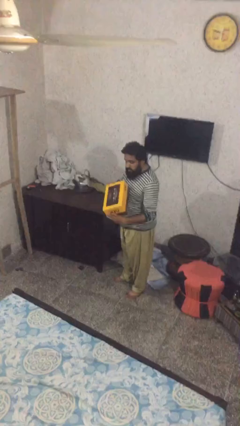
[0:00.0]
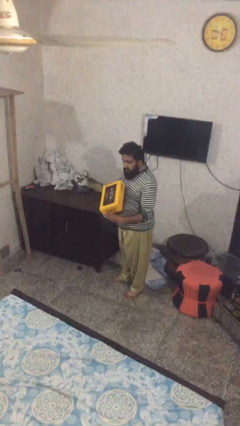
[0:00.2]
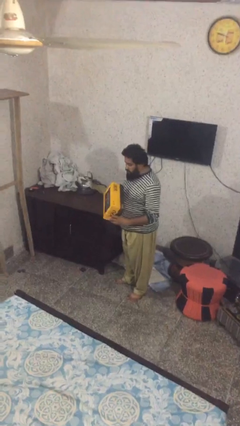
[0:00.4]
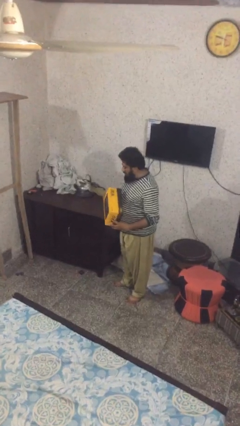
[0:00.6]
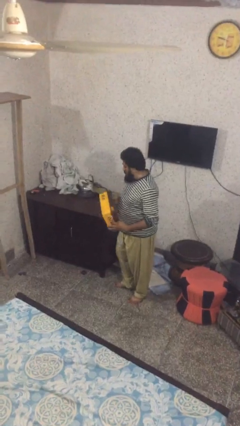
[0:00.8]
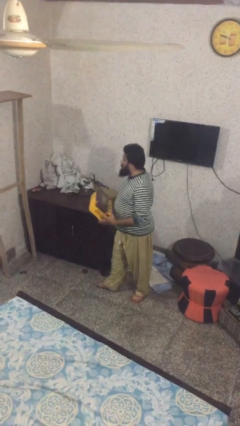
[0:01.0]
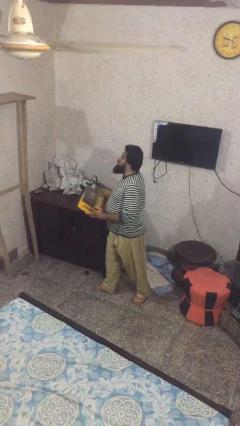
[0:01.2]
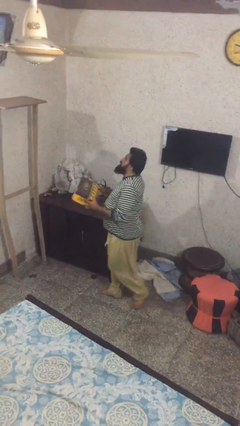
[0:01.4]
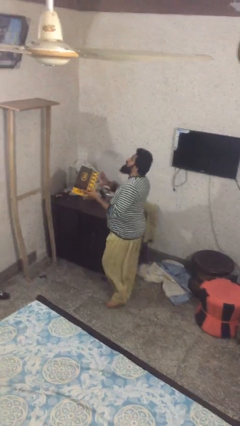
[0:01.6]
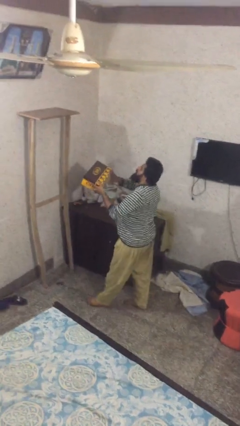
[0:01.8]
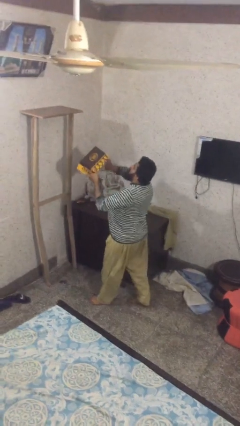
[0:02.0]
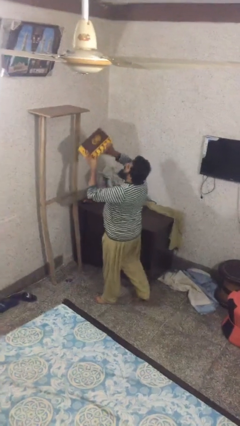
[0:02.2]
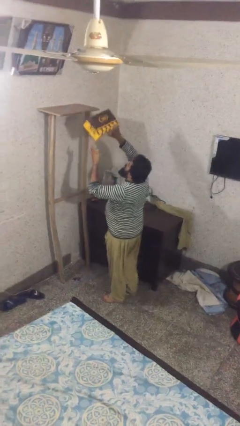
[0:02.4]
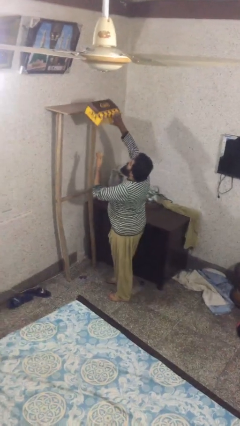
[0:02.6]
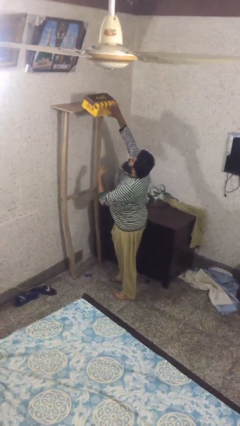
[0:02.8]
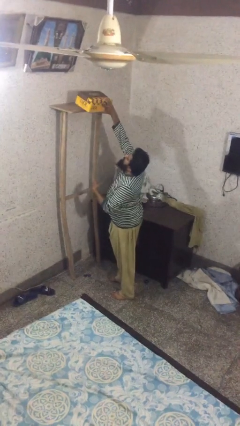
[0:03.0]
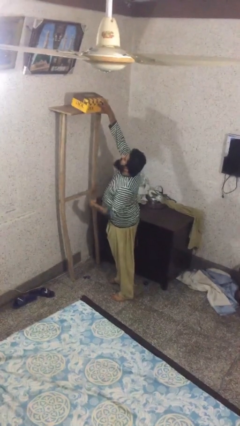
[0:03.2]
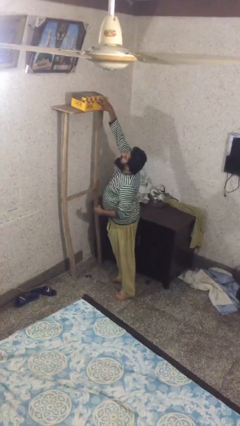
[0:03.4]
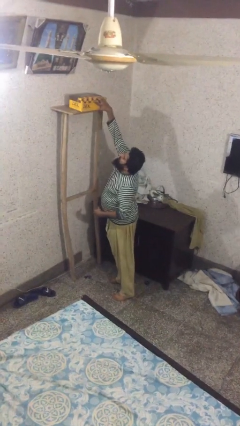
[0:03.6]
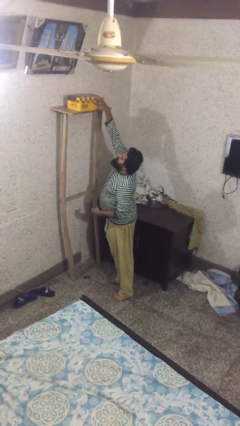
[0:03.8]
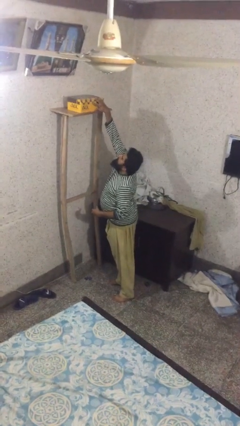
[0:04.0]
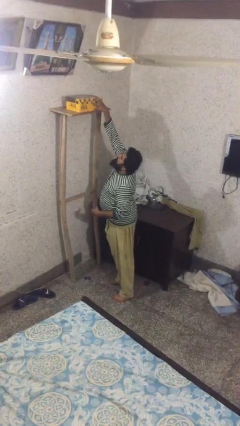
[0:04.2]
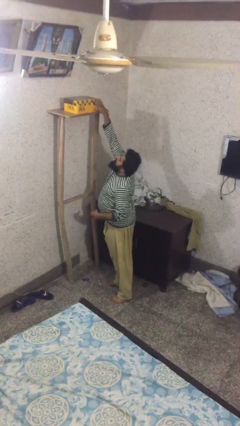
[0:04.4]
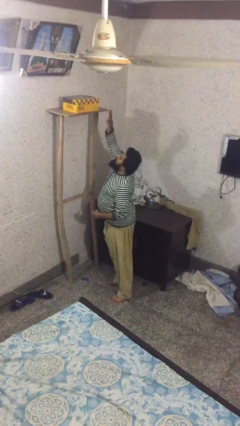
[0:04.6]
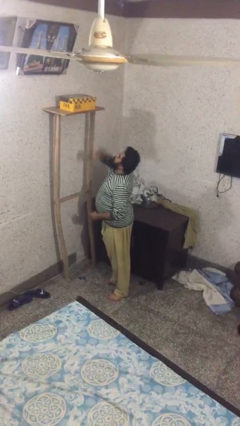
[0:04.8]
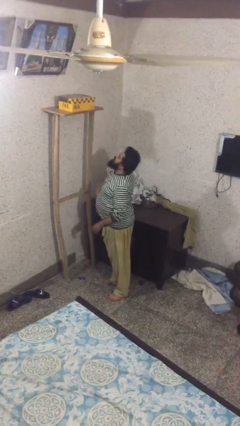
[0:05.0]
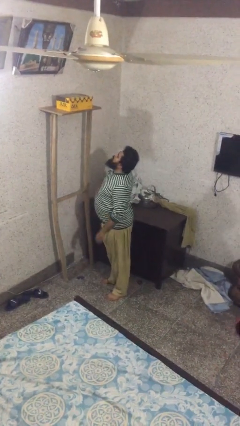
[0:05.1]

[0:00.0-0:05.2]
person puts down object on shelf

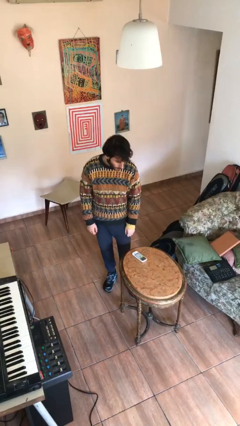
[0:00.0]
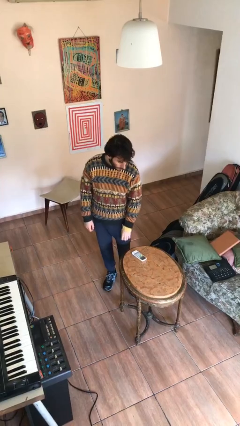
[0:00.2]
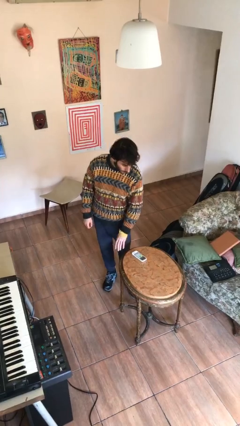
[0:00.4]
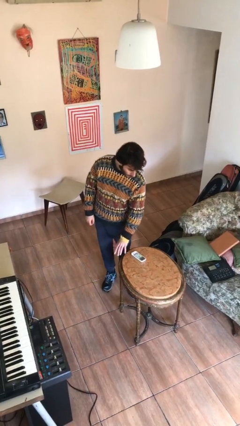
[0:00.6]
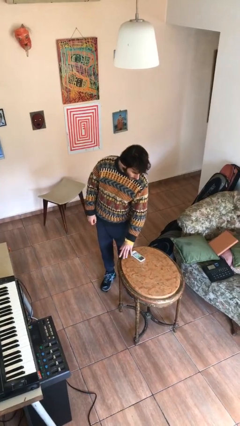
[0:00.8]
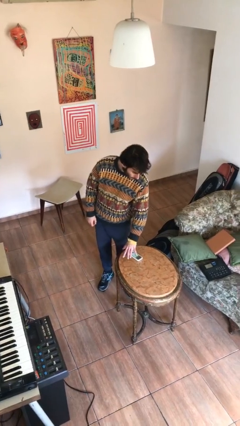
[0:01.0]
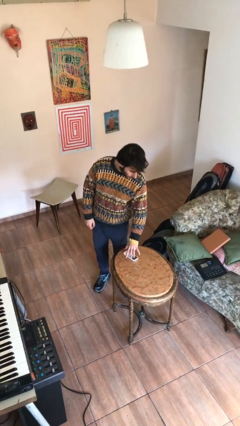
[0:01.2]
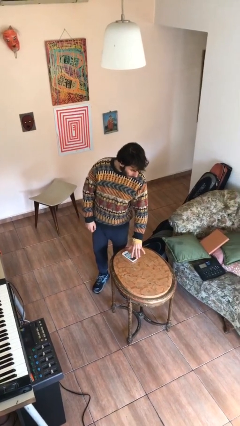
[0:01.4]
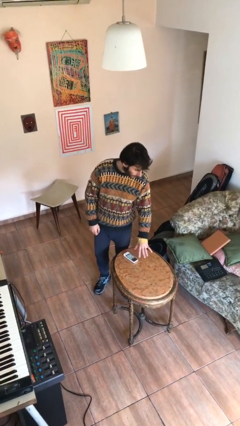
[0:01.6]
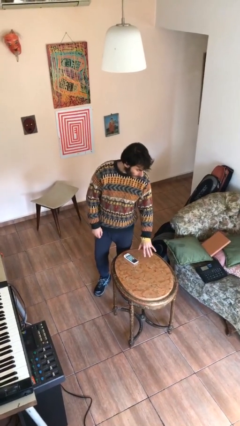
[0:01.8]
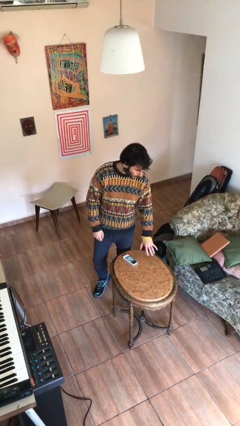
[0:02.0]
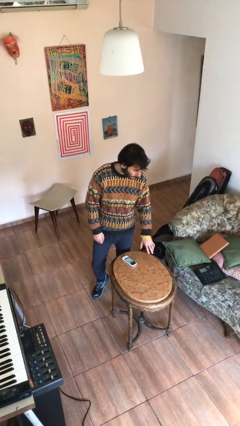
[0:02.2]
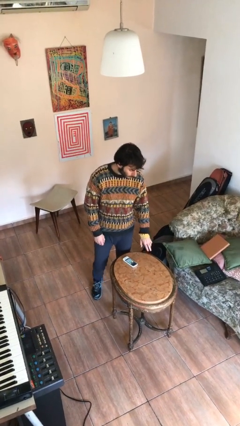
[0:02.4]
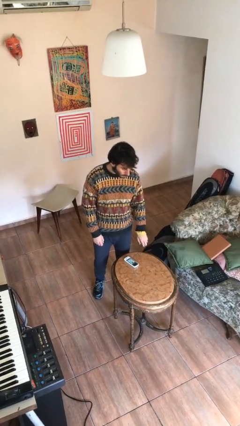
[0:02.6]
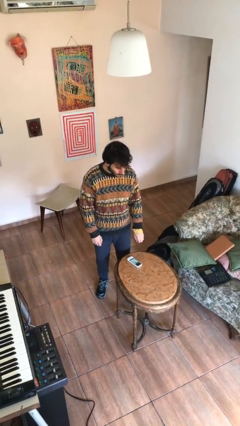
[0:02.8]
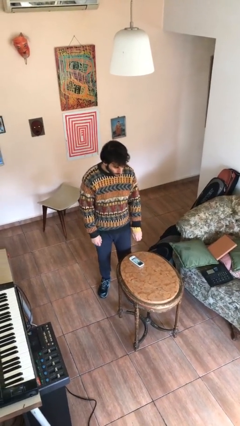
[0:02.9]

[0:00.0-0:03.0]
person waves hand over object

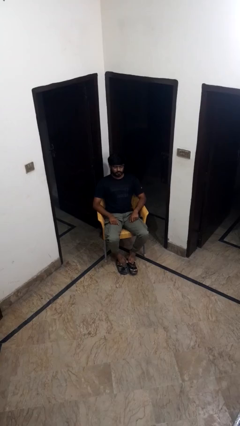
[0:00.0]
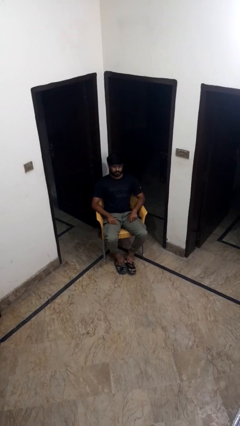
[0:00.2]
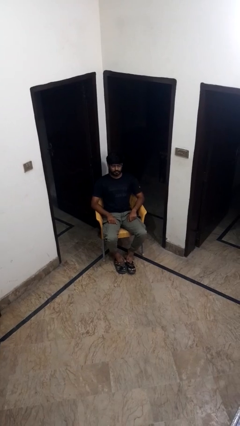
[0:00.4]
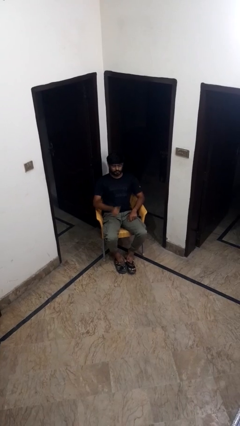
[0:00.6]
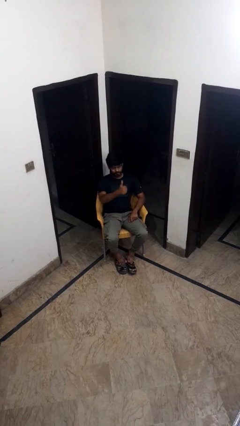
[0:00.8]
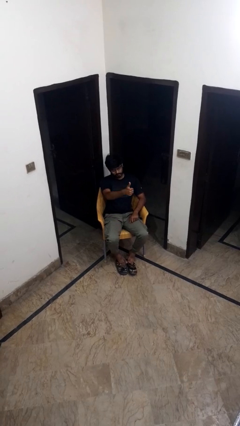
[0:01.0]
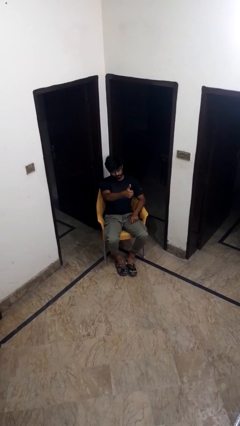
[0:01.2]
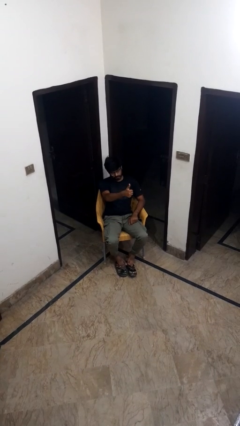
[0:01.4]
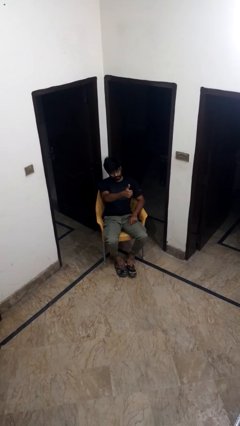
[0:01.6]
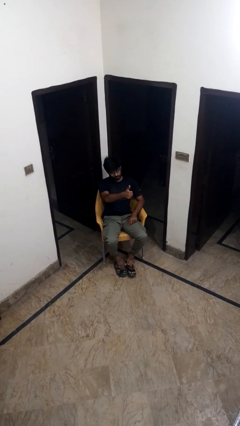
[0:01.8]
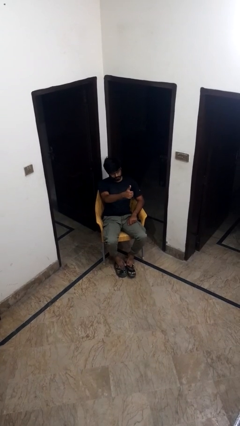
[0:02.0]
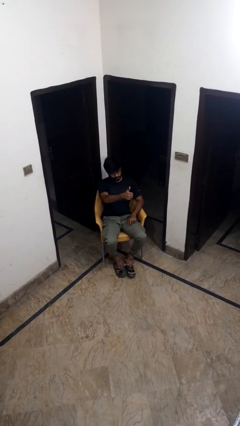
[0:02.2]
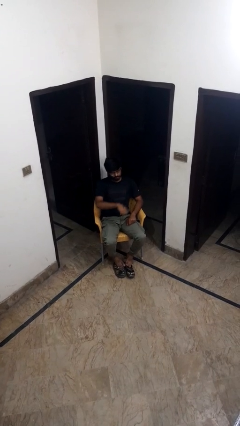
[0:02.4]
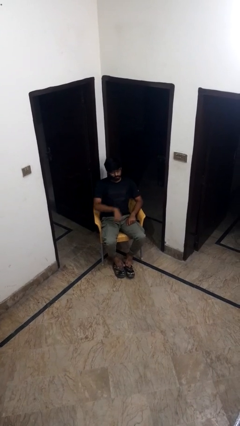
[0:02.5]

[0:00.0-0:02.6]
person gestures thumbs up

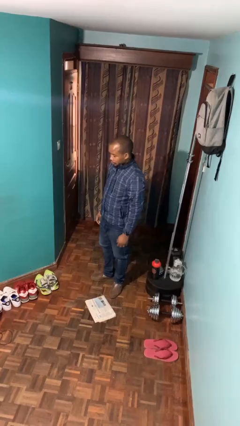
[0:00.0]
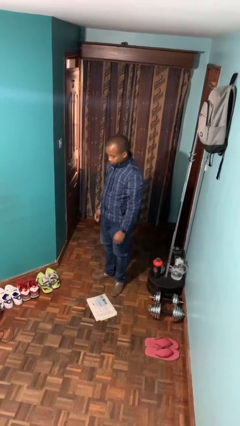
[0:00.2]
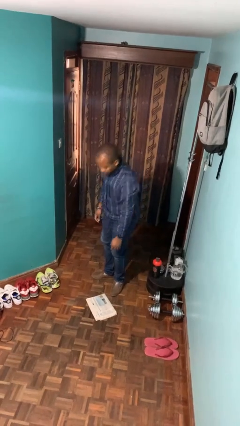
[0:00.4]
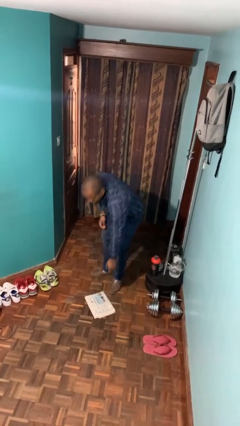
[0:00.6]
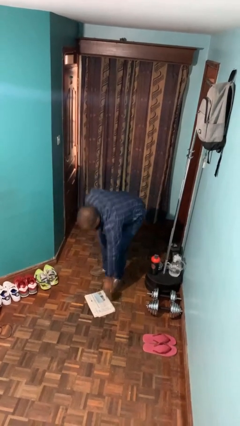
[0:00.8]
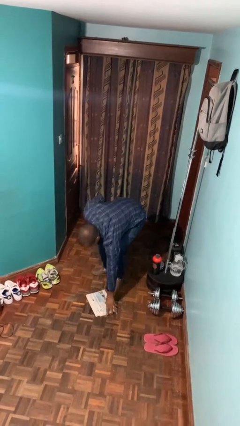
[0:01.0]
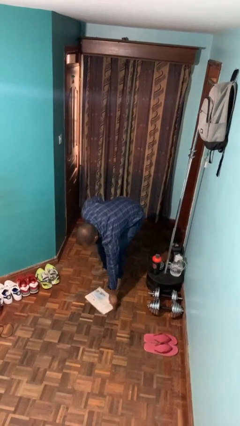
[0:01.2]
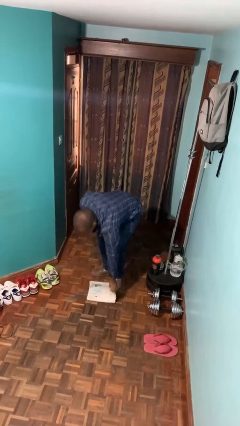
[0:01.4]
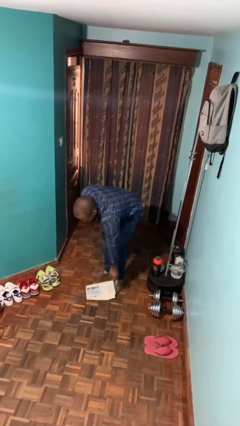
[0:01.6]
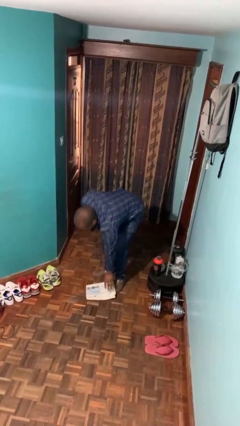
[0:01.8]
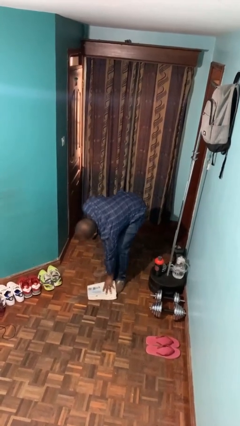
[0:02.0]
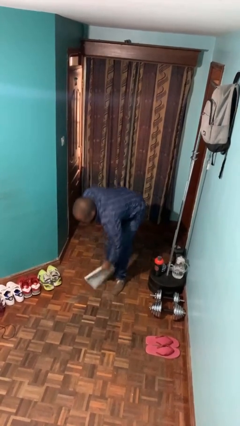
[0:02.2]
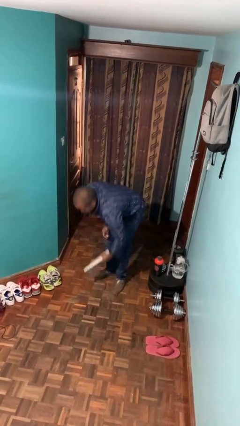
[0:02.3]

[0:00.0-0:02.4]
person picks up object from floor

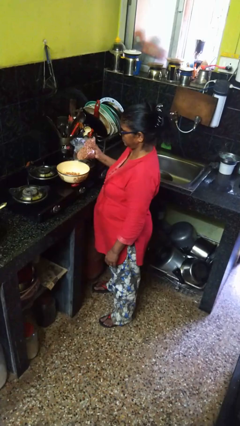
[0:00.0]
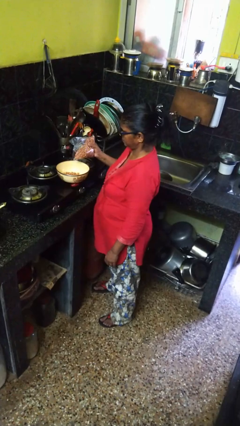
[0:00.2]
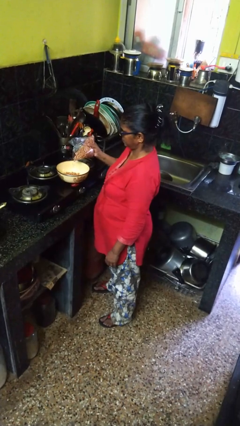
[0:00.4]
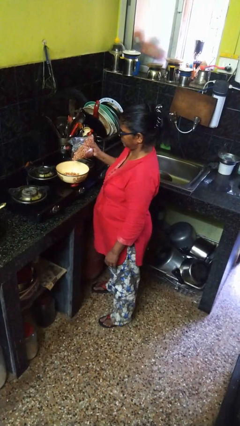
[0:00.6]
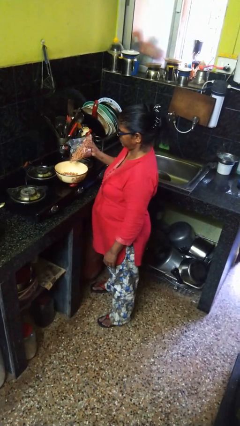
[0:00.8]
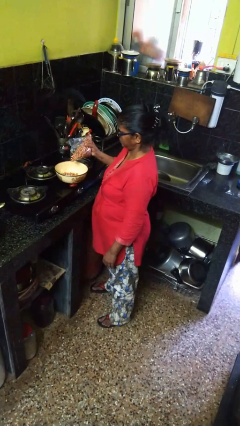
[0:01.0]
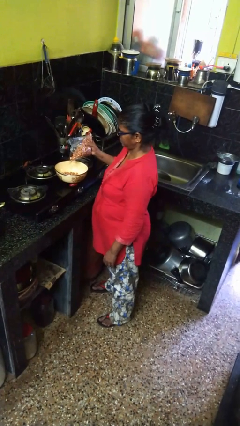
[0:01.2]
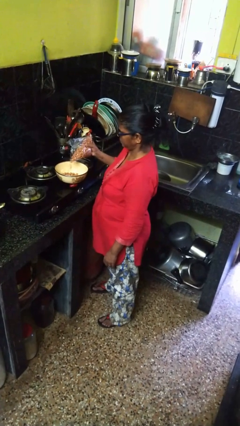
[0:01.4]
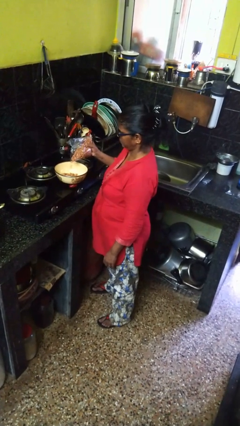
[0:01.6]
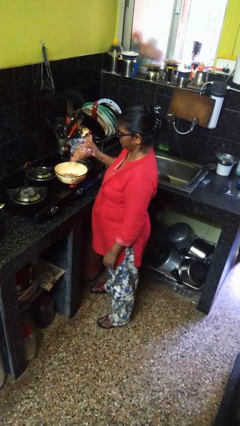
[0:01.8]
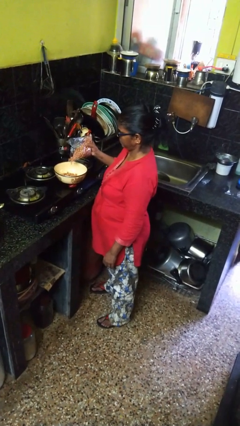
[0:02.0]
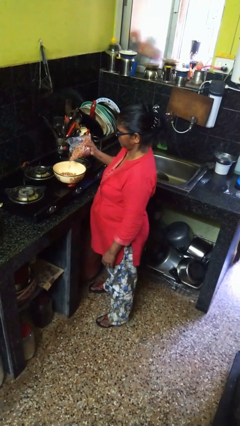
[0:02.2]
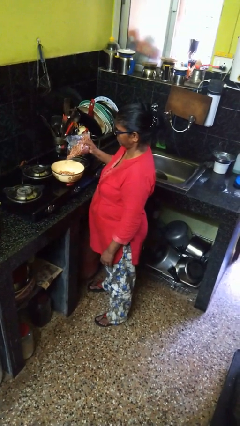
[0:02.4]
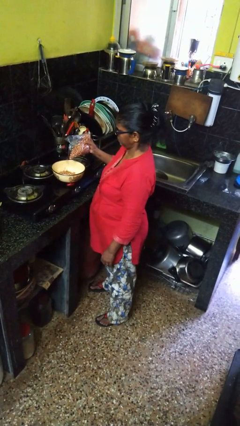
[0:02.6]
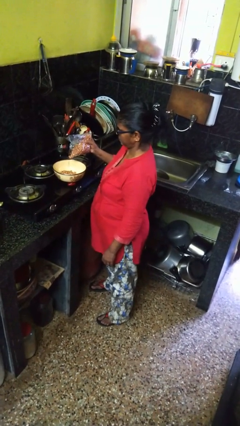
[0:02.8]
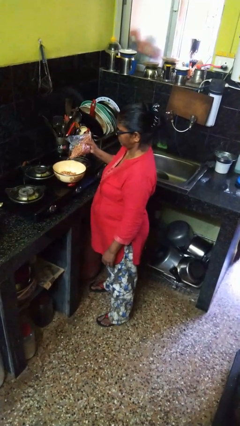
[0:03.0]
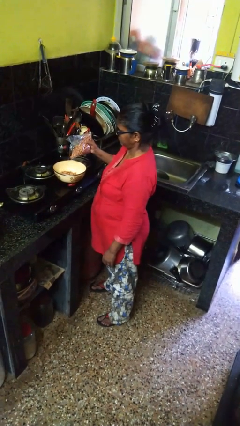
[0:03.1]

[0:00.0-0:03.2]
person pours into bowl

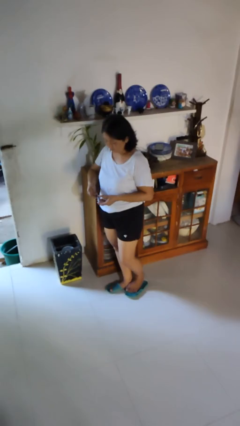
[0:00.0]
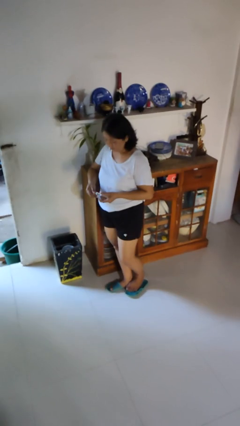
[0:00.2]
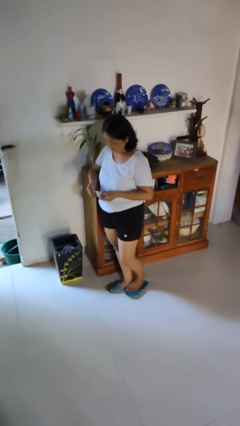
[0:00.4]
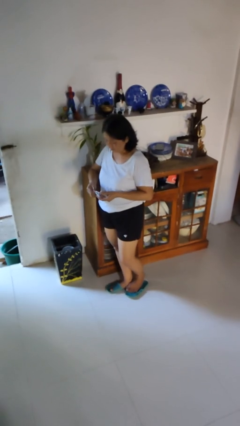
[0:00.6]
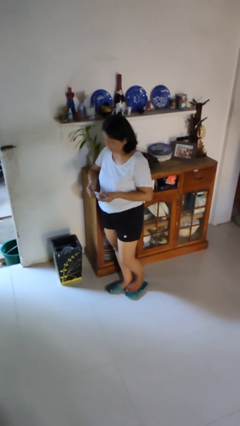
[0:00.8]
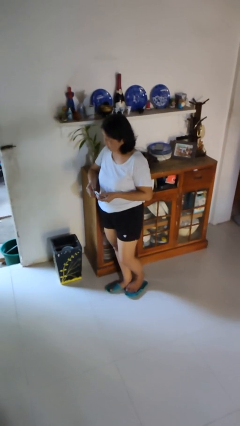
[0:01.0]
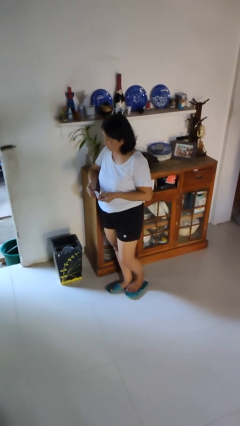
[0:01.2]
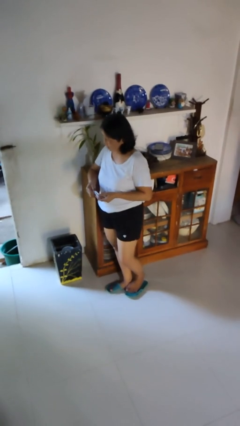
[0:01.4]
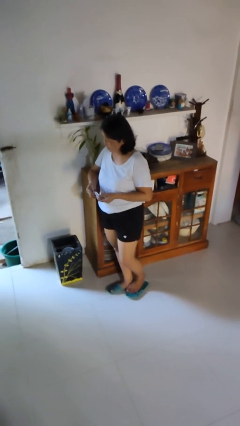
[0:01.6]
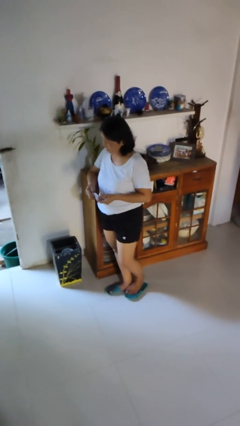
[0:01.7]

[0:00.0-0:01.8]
person clips fingernails
